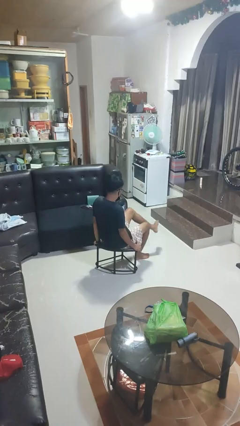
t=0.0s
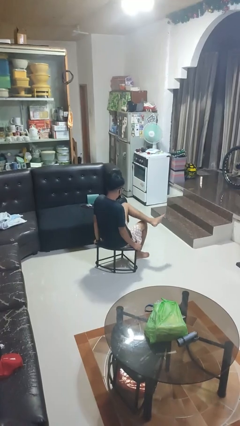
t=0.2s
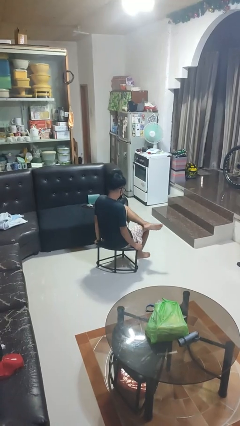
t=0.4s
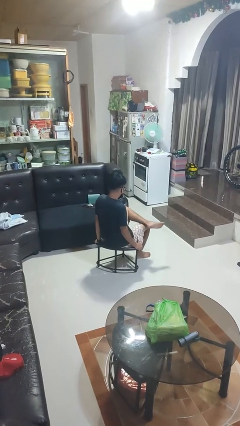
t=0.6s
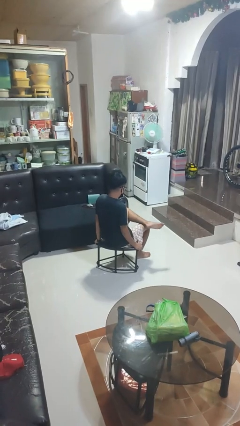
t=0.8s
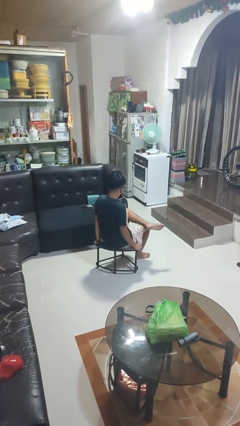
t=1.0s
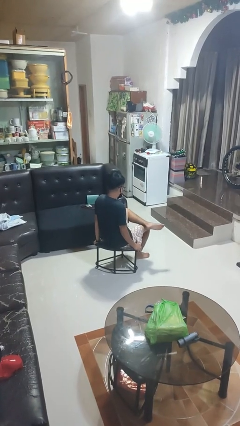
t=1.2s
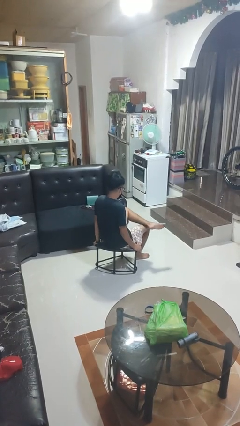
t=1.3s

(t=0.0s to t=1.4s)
person crosses legs

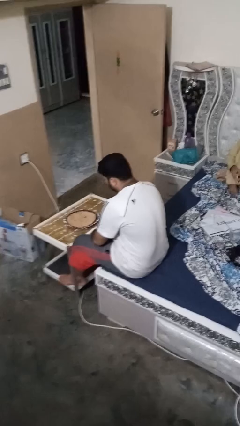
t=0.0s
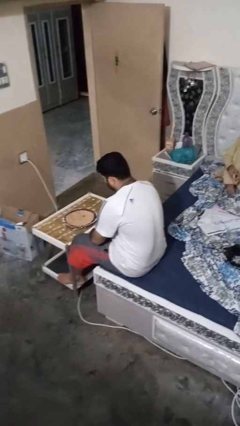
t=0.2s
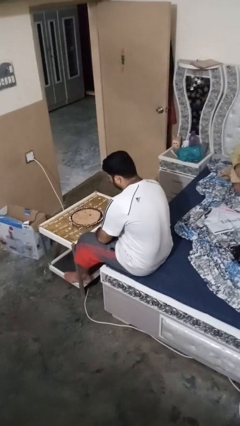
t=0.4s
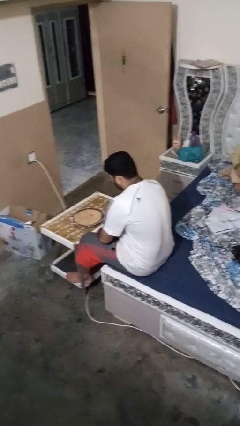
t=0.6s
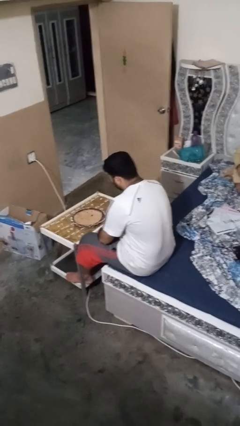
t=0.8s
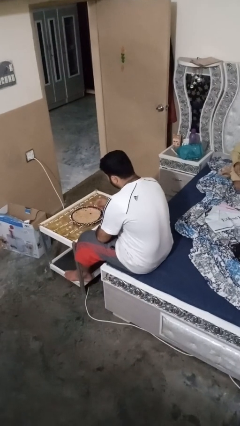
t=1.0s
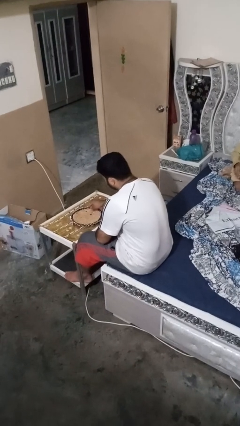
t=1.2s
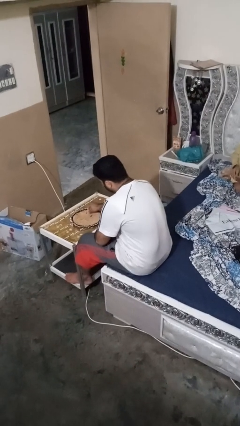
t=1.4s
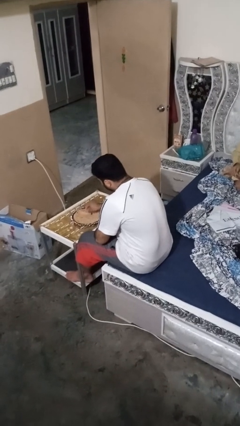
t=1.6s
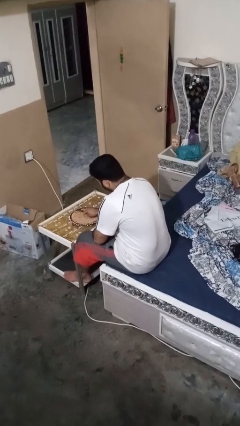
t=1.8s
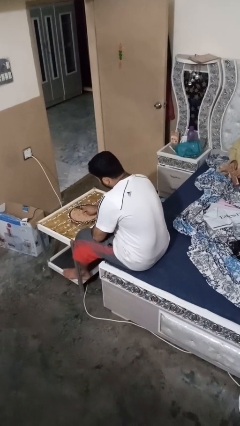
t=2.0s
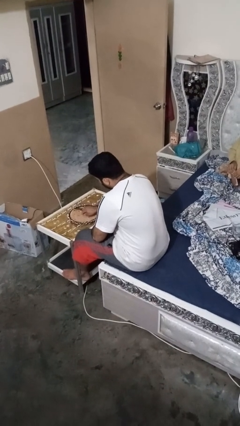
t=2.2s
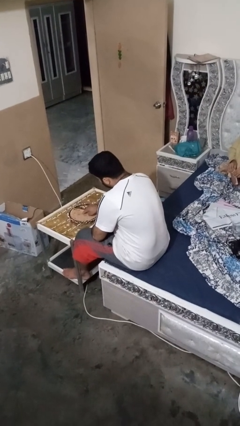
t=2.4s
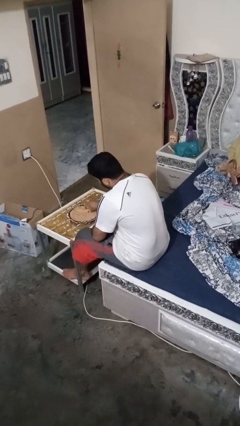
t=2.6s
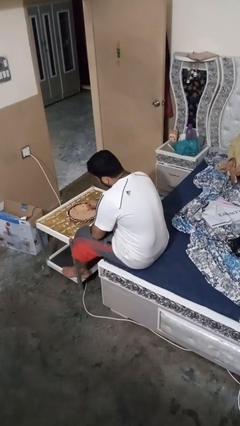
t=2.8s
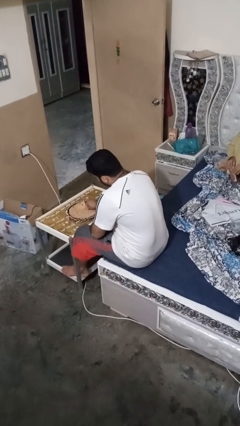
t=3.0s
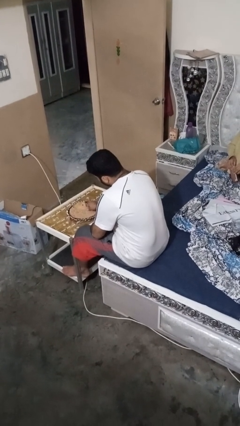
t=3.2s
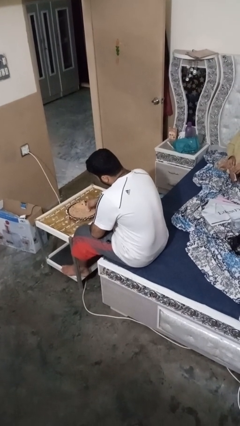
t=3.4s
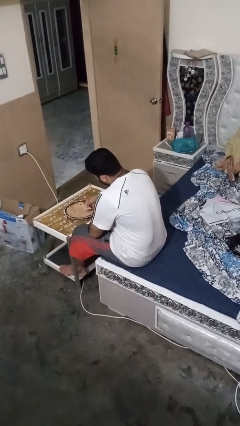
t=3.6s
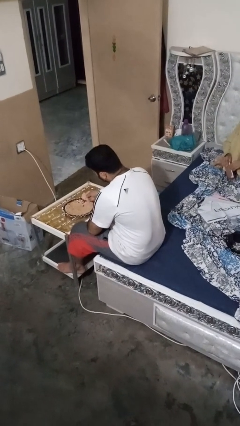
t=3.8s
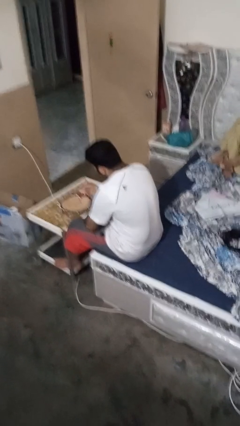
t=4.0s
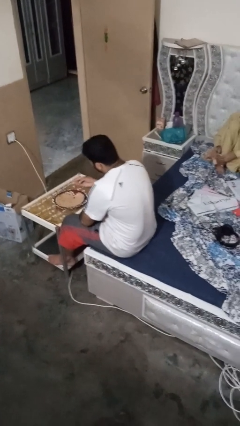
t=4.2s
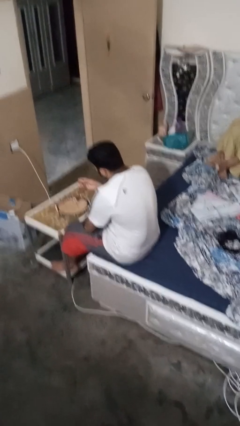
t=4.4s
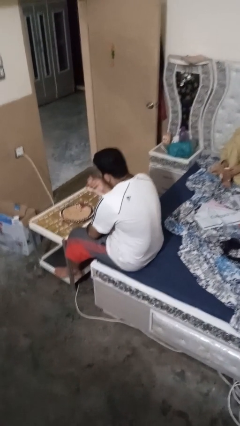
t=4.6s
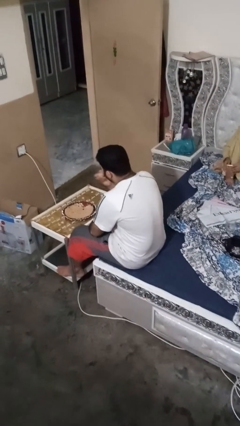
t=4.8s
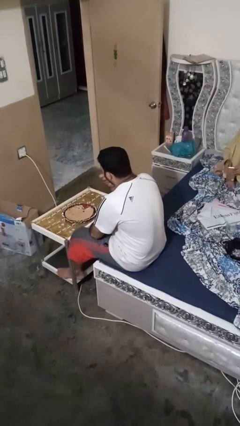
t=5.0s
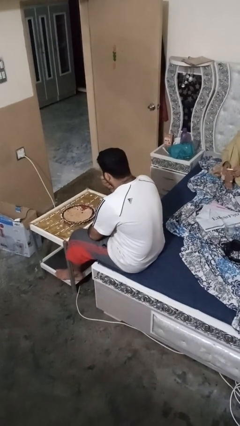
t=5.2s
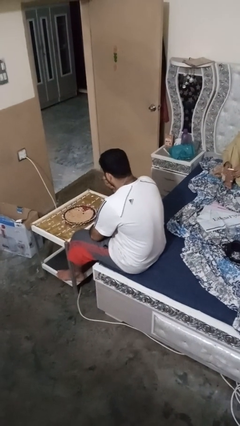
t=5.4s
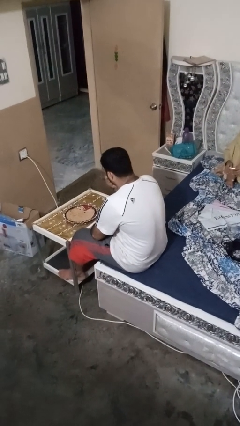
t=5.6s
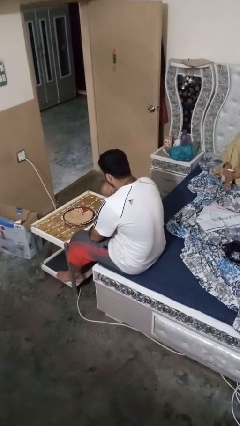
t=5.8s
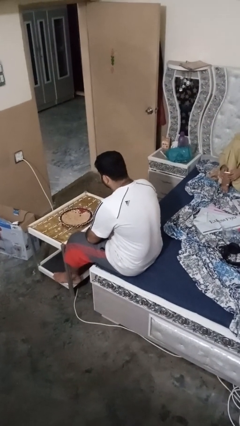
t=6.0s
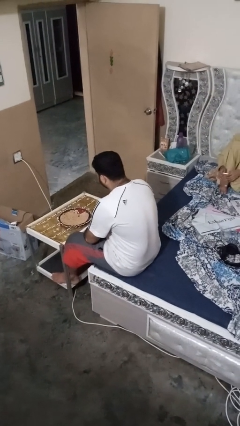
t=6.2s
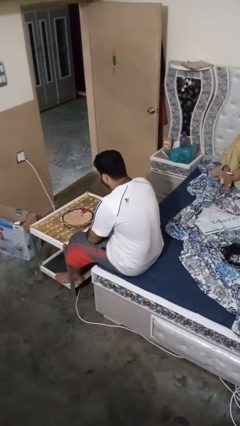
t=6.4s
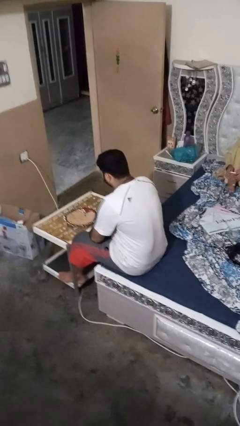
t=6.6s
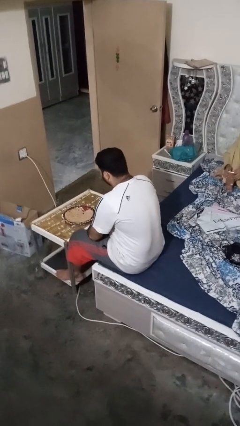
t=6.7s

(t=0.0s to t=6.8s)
person eats with hands

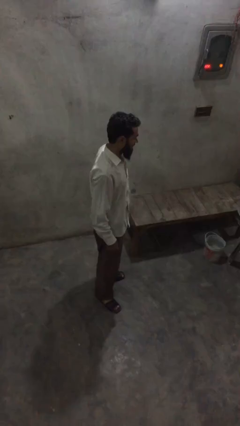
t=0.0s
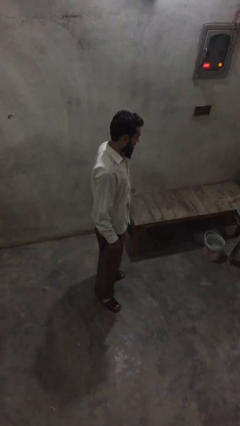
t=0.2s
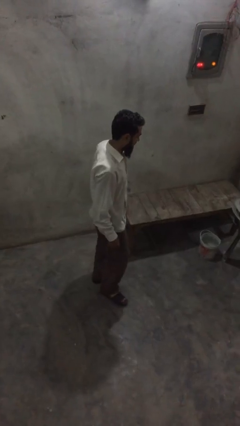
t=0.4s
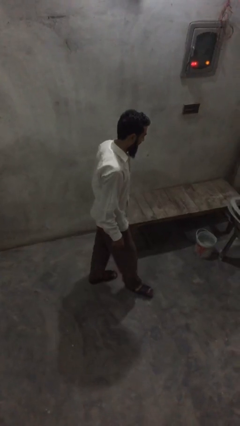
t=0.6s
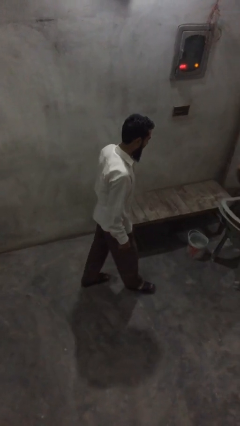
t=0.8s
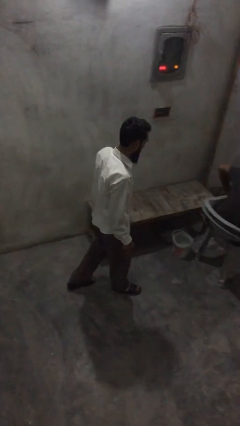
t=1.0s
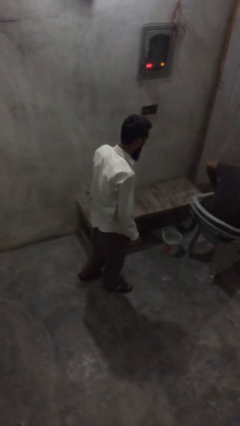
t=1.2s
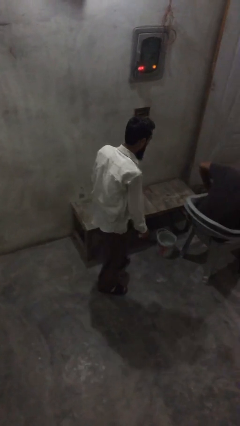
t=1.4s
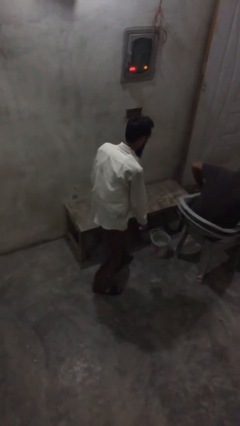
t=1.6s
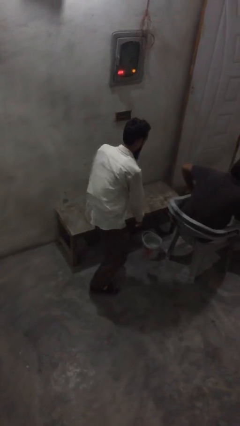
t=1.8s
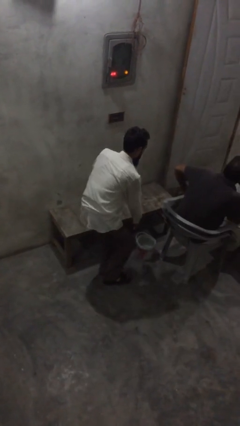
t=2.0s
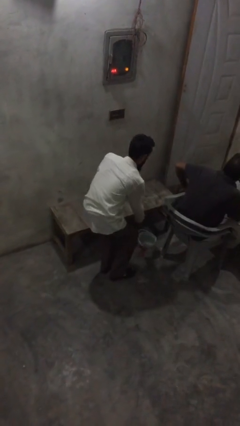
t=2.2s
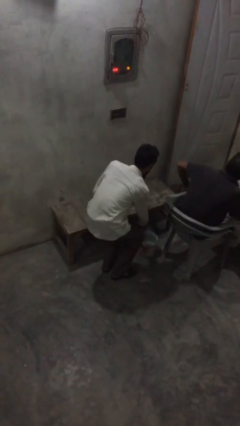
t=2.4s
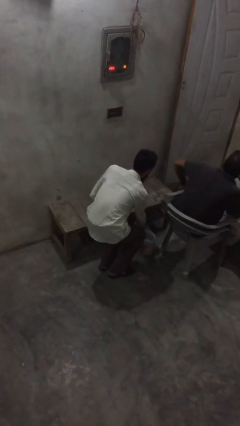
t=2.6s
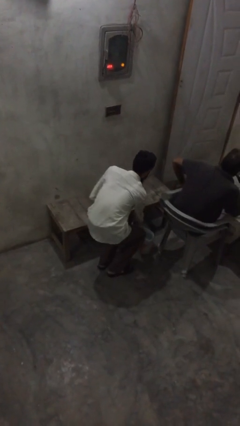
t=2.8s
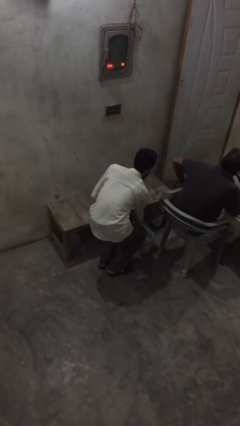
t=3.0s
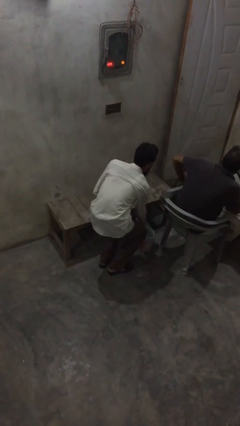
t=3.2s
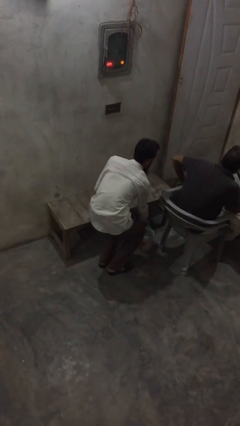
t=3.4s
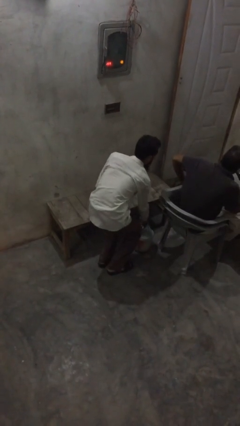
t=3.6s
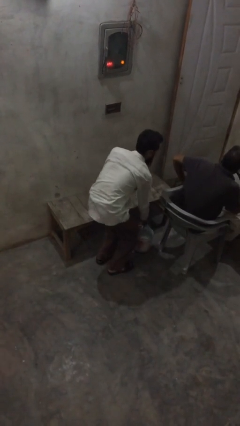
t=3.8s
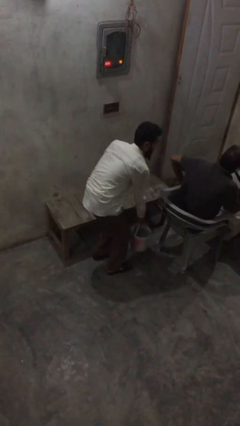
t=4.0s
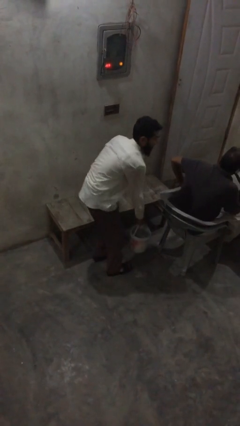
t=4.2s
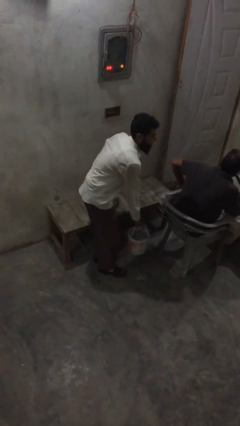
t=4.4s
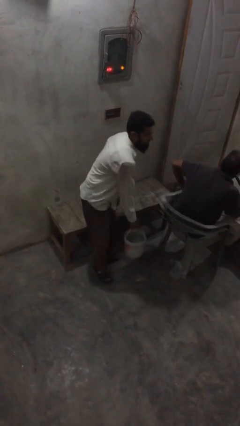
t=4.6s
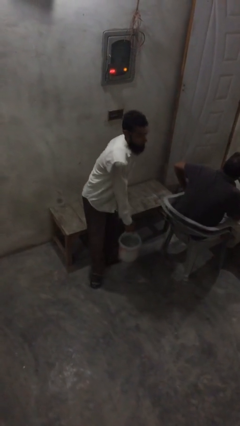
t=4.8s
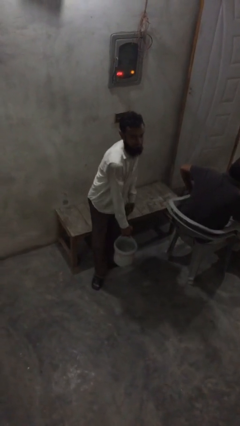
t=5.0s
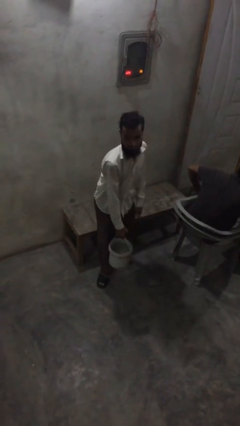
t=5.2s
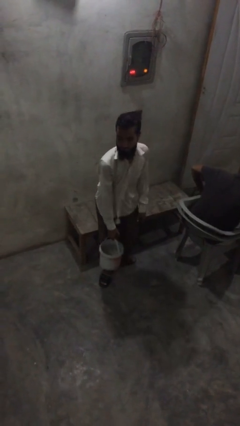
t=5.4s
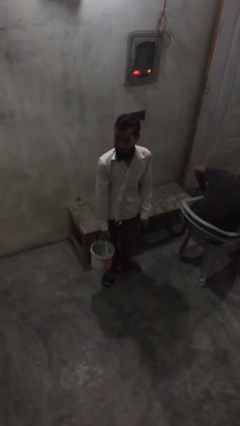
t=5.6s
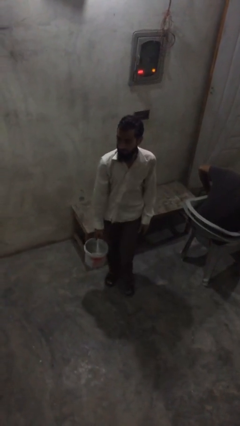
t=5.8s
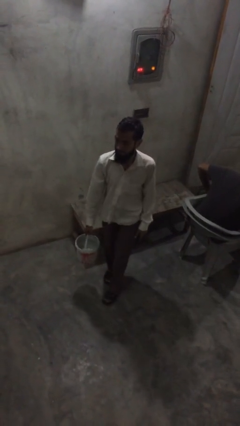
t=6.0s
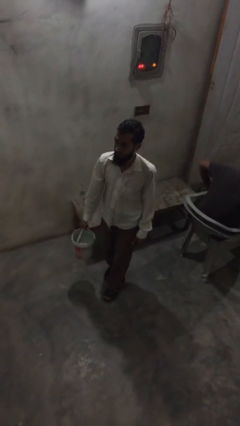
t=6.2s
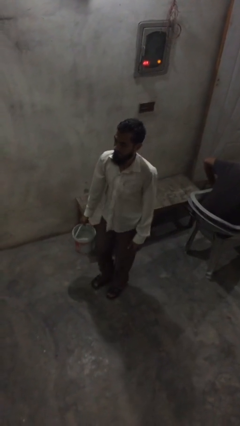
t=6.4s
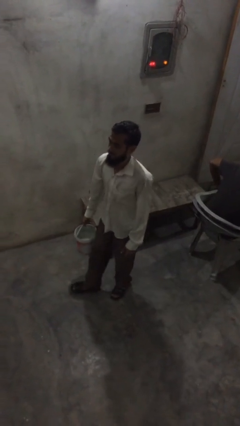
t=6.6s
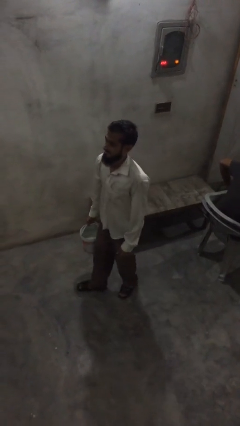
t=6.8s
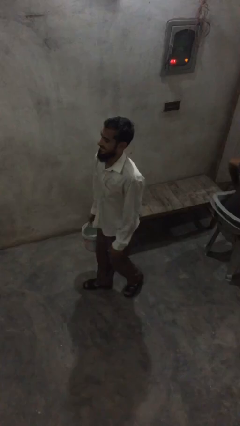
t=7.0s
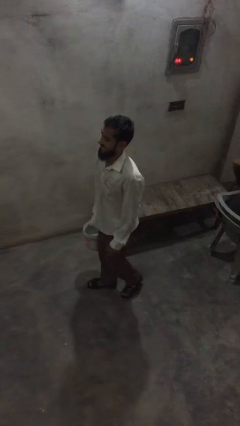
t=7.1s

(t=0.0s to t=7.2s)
person steals object from person

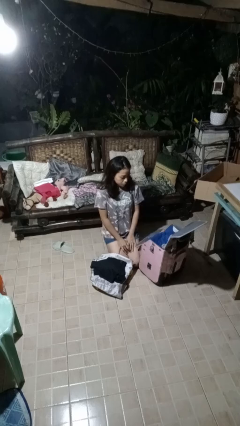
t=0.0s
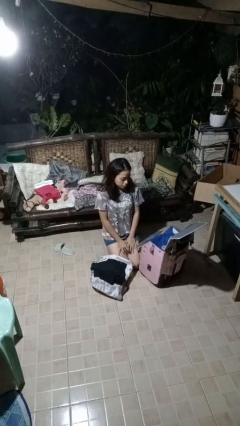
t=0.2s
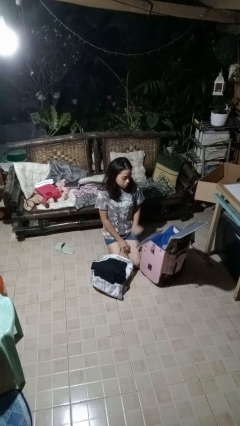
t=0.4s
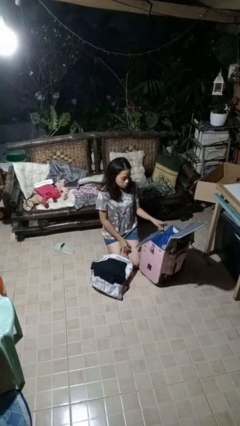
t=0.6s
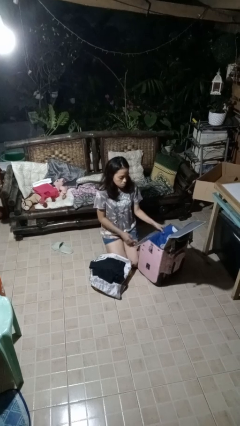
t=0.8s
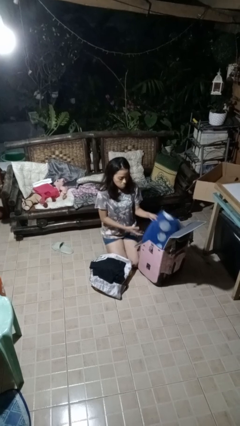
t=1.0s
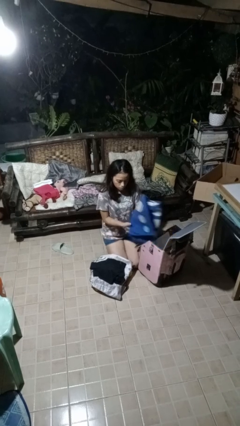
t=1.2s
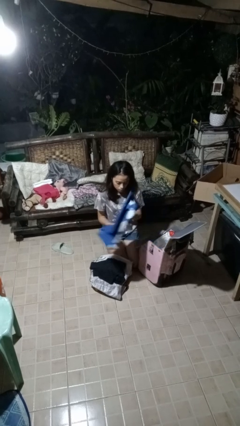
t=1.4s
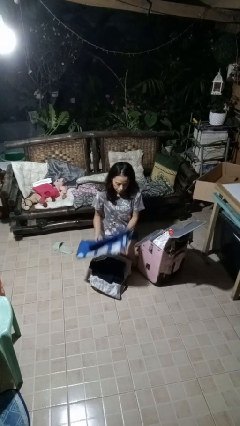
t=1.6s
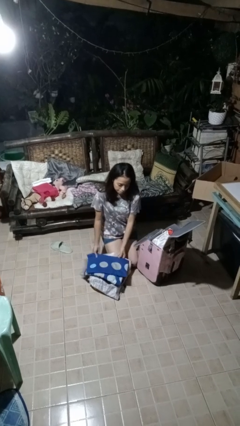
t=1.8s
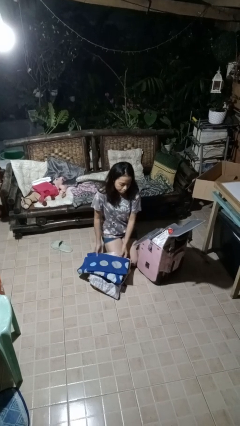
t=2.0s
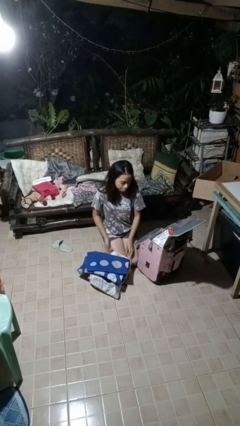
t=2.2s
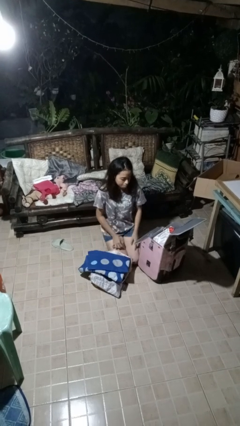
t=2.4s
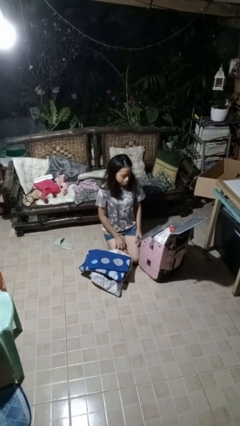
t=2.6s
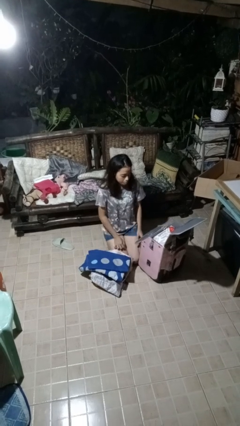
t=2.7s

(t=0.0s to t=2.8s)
person unloads clothes from suitcase
